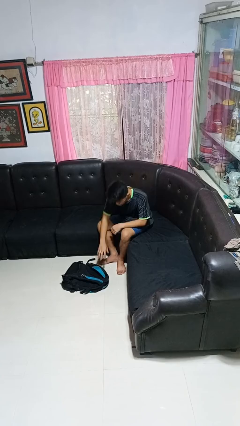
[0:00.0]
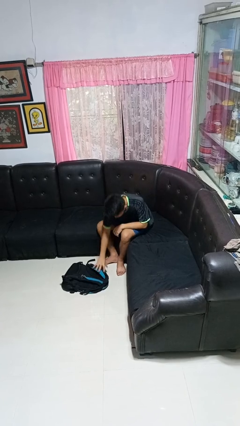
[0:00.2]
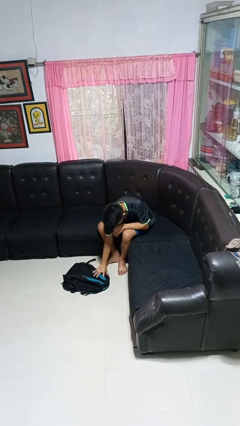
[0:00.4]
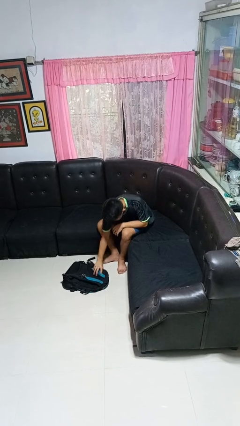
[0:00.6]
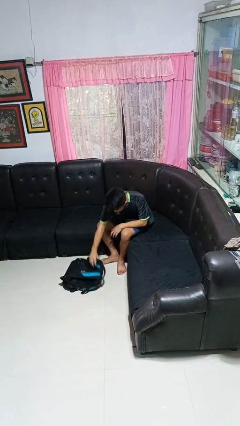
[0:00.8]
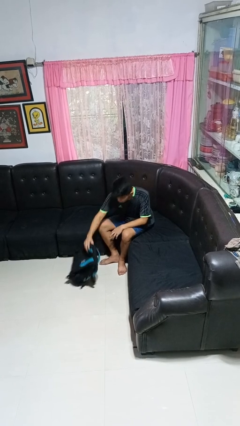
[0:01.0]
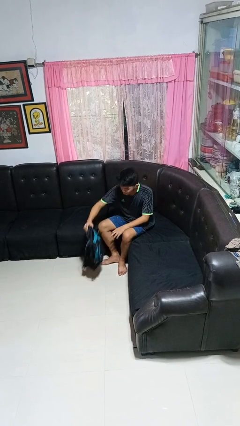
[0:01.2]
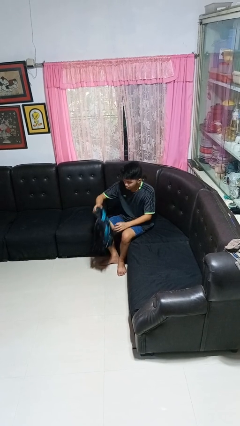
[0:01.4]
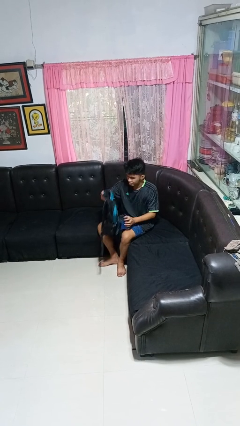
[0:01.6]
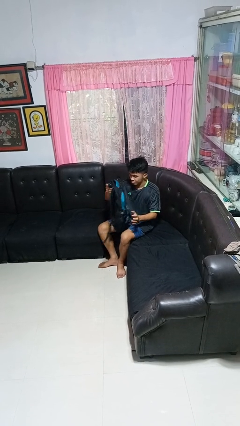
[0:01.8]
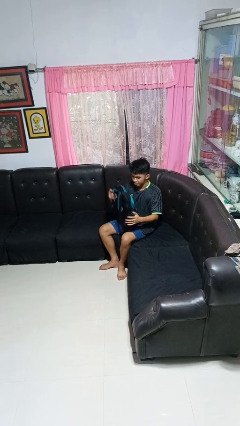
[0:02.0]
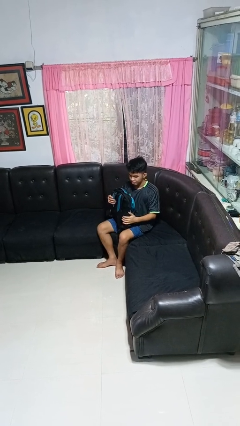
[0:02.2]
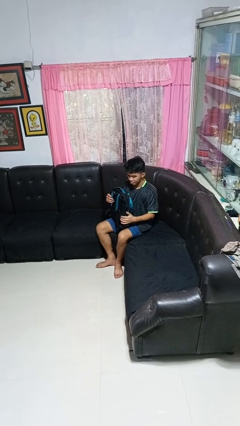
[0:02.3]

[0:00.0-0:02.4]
person picks up object from floor

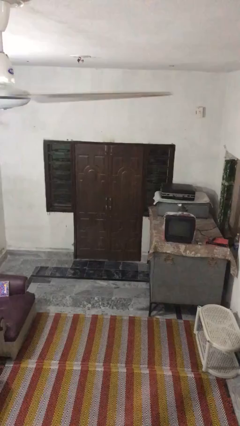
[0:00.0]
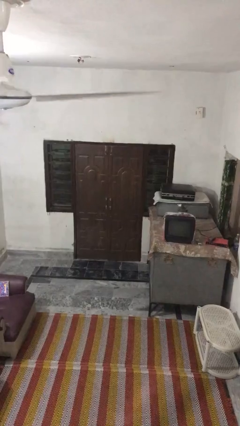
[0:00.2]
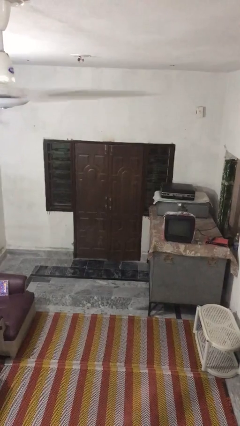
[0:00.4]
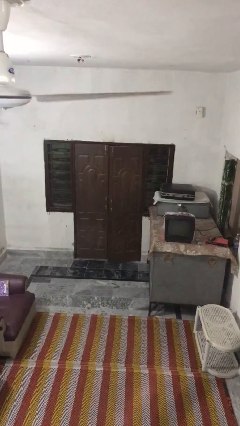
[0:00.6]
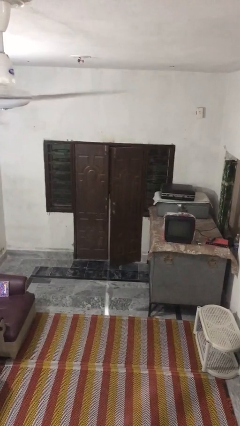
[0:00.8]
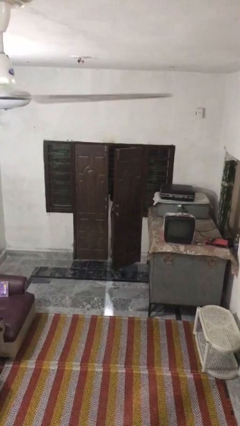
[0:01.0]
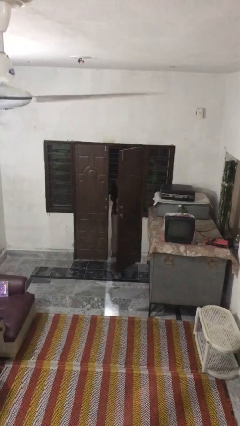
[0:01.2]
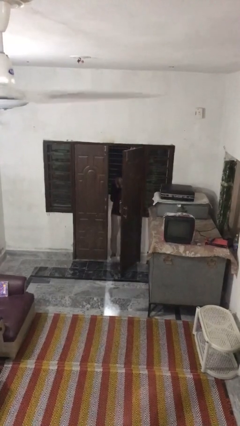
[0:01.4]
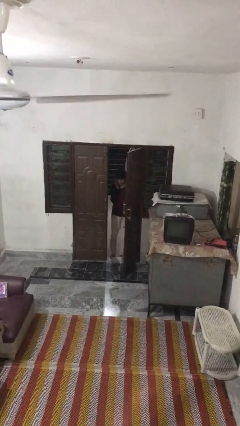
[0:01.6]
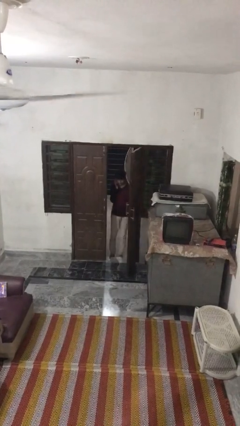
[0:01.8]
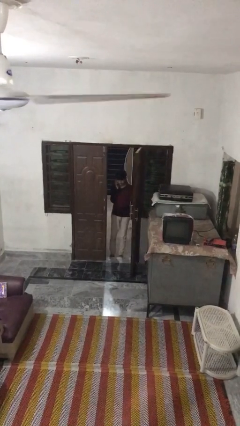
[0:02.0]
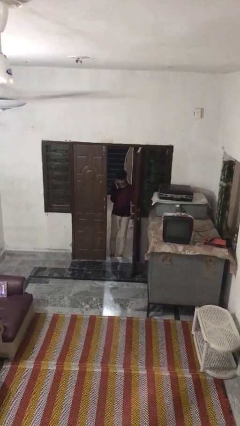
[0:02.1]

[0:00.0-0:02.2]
person opens facility door

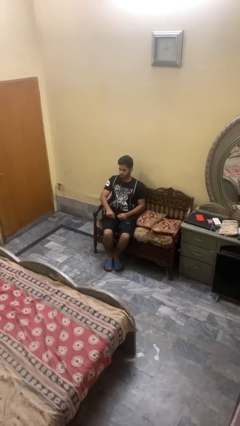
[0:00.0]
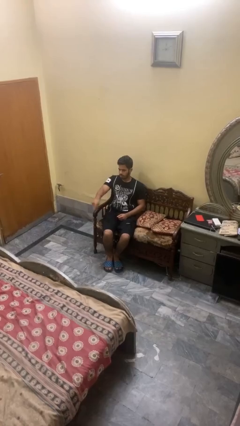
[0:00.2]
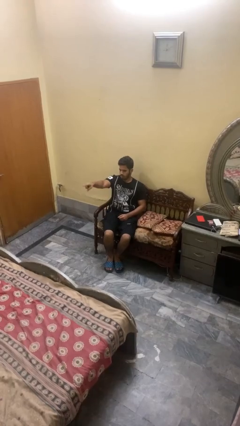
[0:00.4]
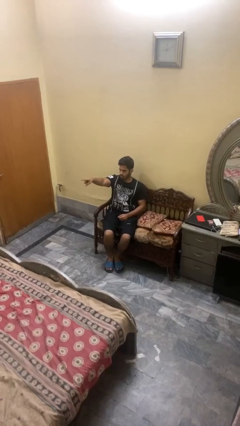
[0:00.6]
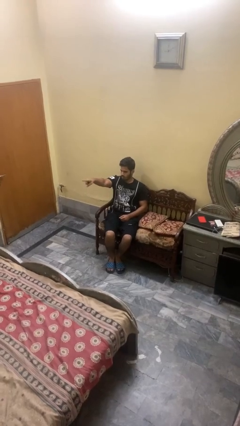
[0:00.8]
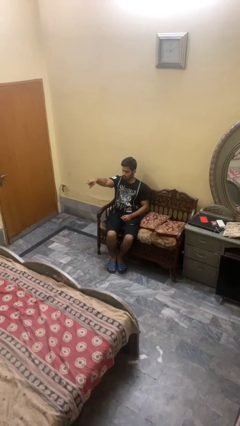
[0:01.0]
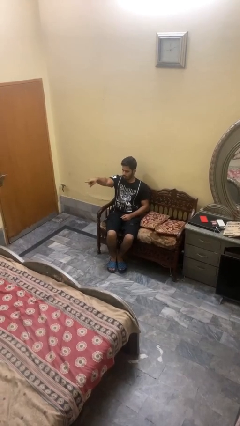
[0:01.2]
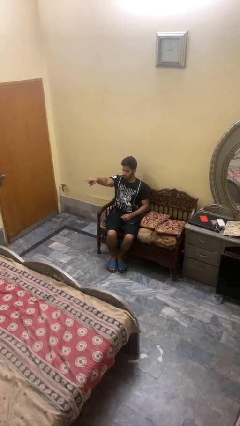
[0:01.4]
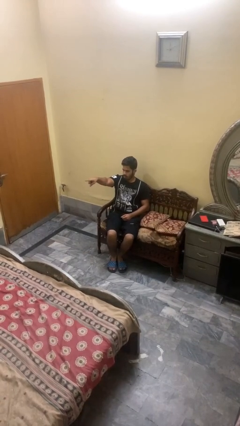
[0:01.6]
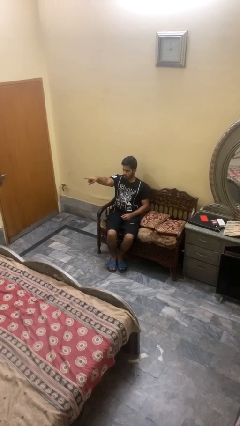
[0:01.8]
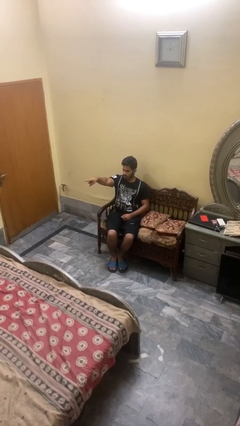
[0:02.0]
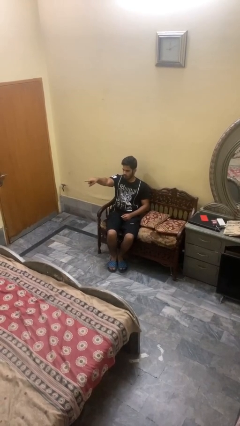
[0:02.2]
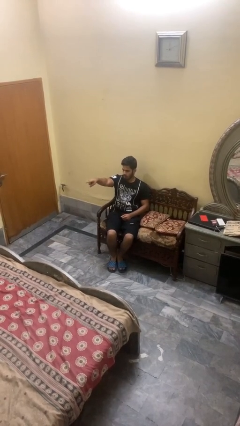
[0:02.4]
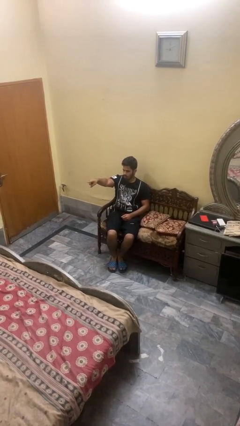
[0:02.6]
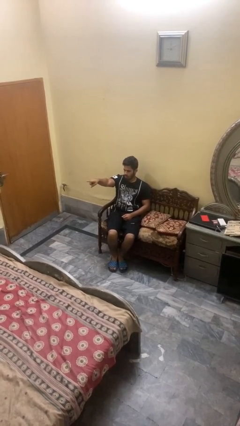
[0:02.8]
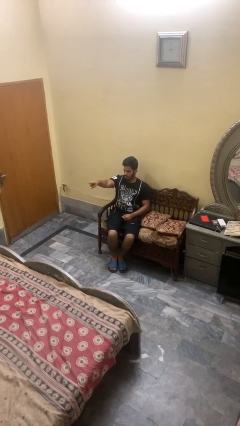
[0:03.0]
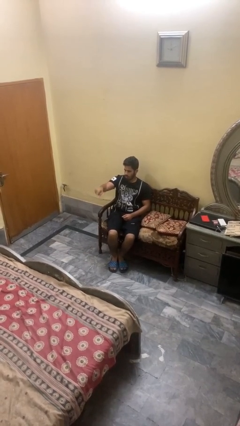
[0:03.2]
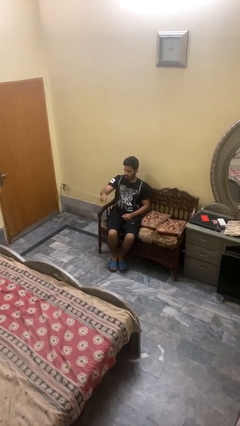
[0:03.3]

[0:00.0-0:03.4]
person points at person

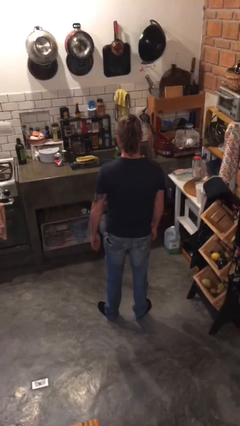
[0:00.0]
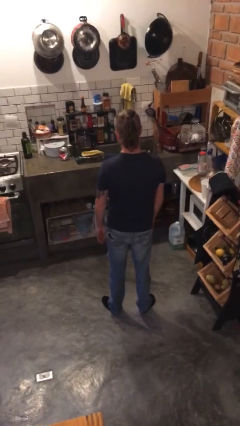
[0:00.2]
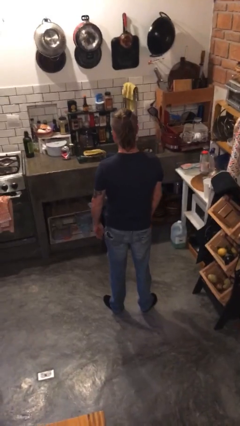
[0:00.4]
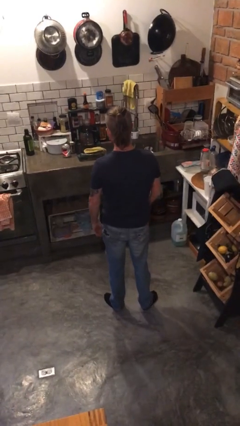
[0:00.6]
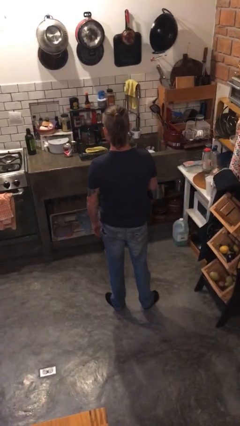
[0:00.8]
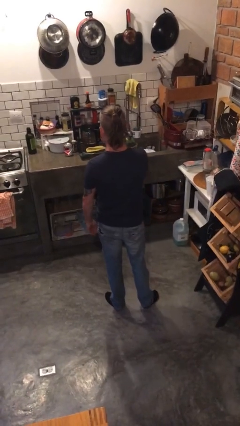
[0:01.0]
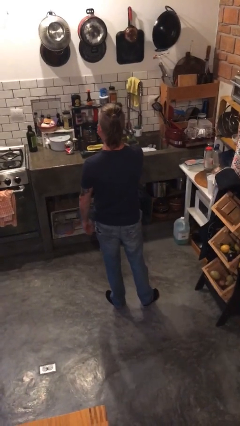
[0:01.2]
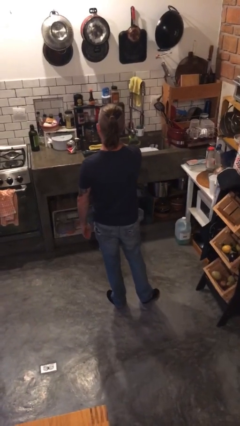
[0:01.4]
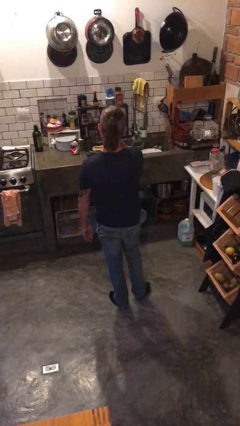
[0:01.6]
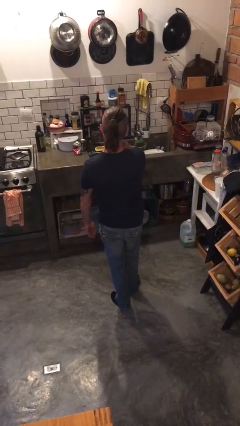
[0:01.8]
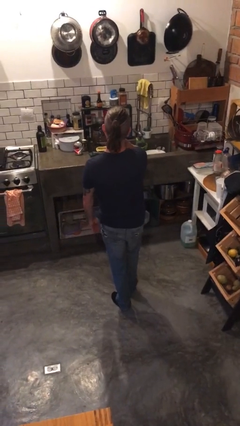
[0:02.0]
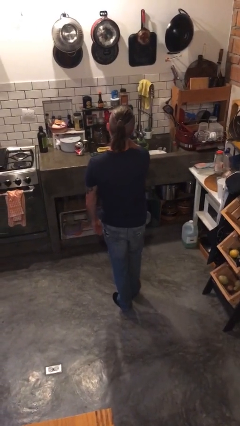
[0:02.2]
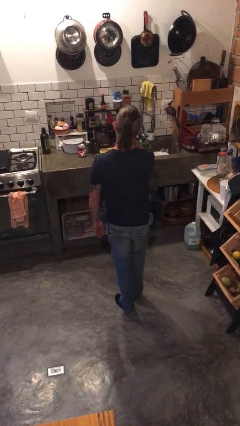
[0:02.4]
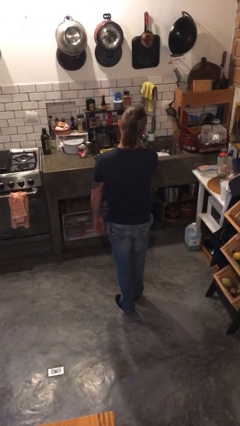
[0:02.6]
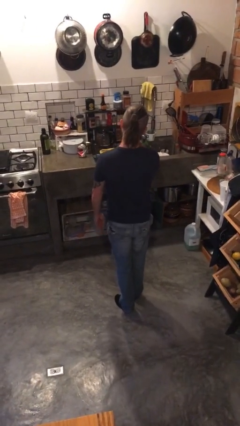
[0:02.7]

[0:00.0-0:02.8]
person yawns

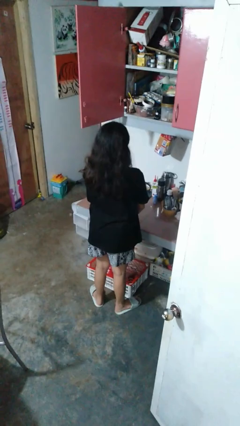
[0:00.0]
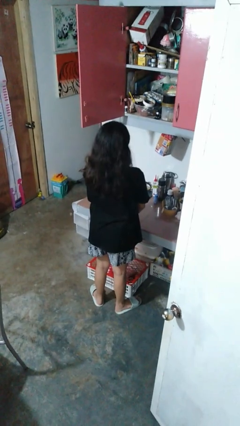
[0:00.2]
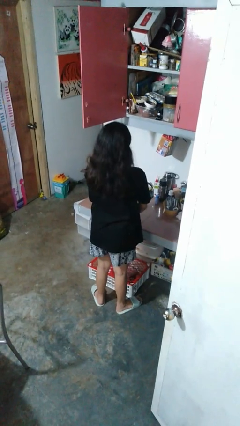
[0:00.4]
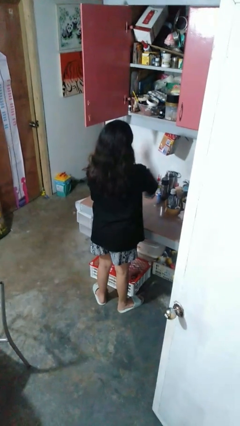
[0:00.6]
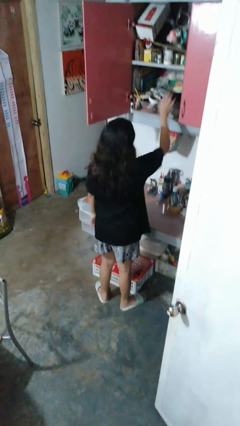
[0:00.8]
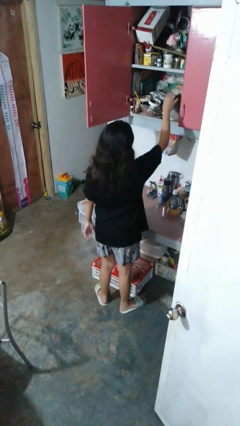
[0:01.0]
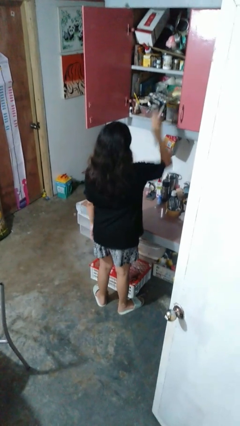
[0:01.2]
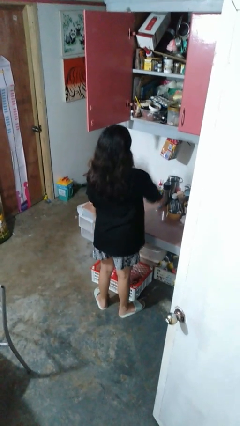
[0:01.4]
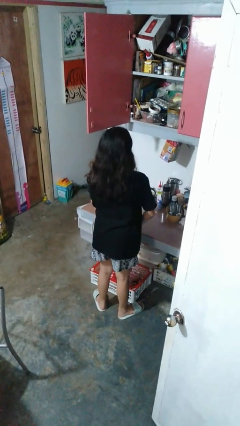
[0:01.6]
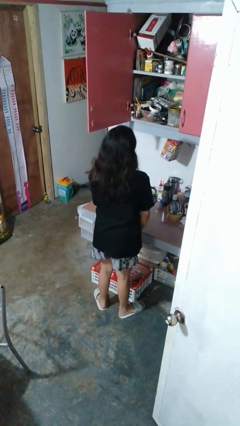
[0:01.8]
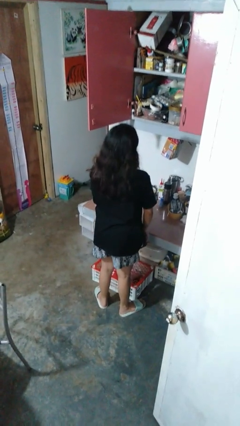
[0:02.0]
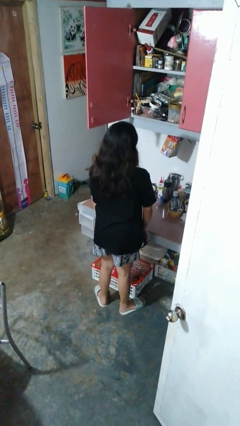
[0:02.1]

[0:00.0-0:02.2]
person takes object from cabinet

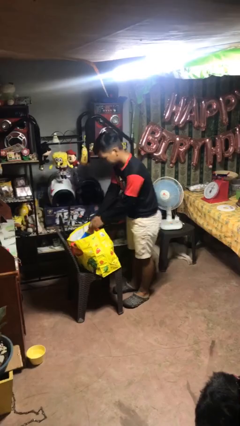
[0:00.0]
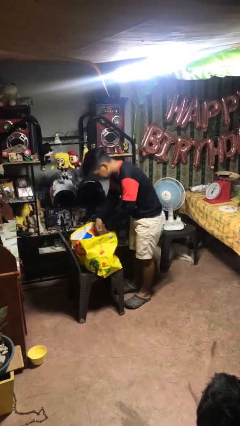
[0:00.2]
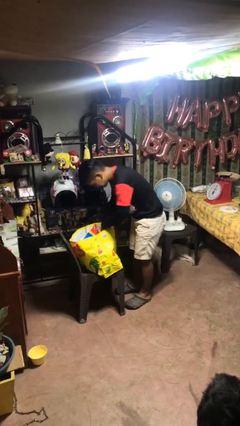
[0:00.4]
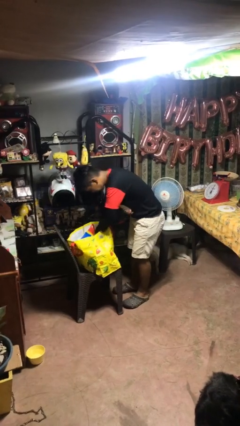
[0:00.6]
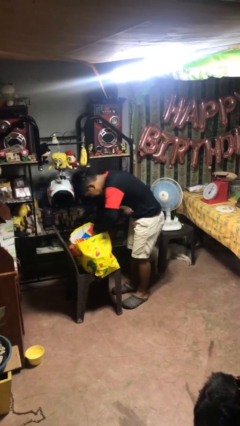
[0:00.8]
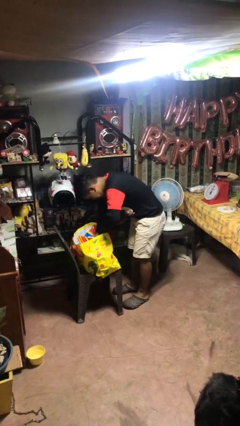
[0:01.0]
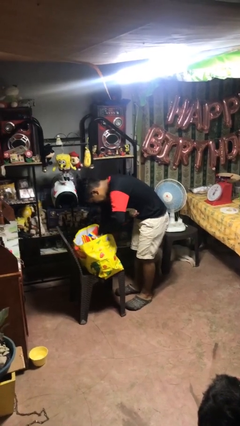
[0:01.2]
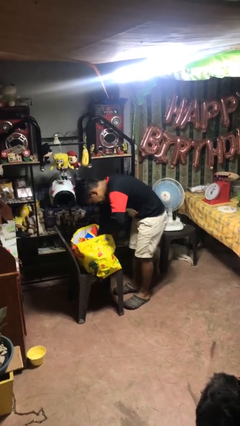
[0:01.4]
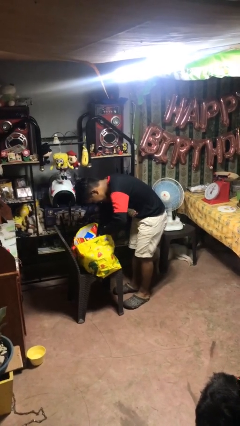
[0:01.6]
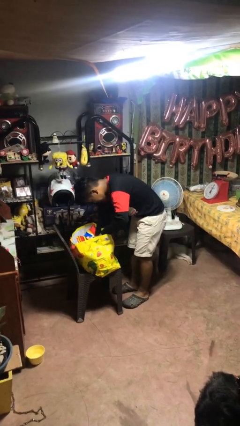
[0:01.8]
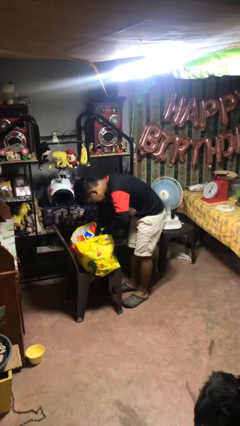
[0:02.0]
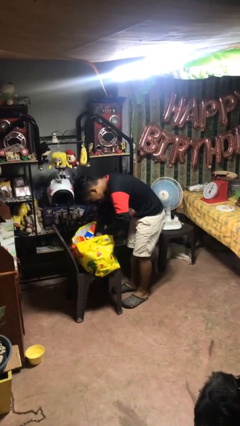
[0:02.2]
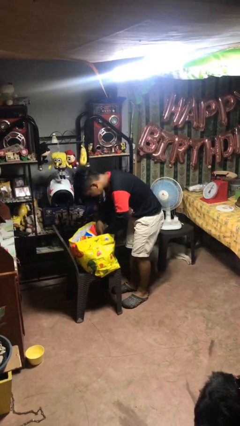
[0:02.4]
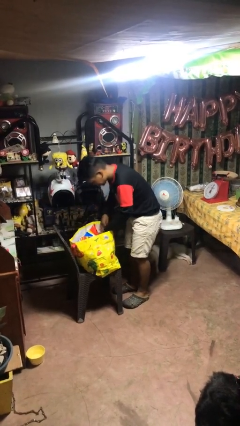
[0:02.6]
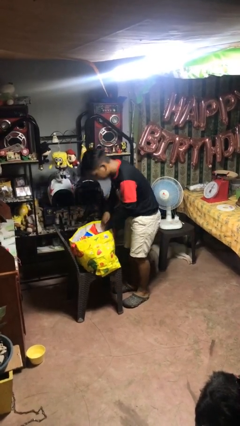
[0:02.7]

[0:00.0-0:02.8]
person searches in bag

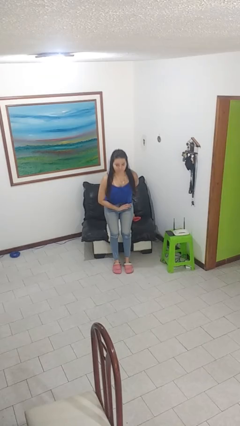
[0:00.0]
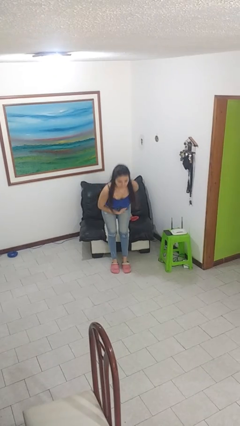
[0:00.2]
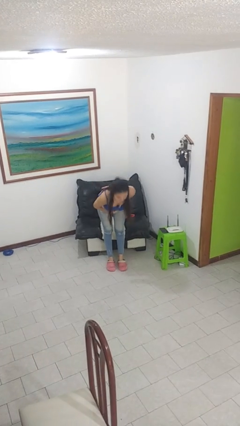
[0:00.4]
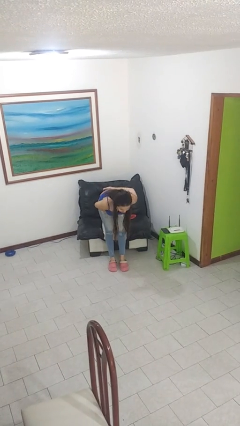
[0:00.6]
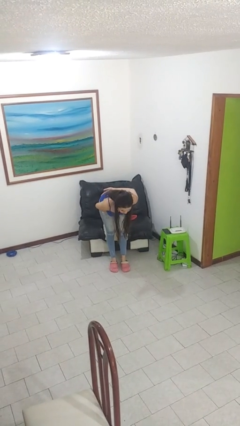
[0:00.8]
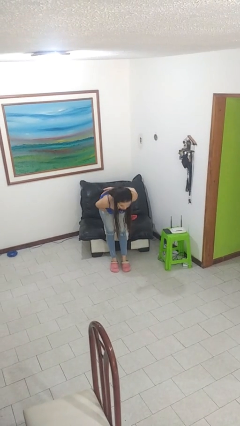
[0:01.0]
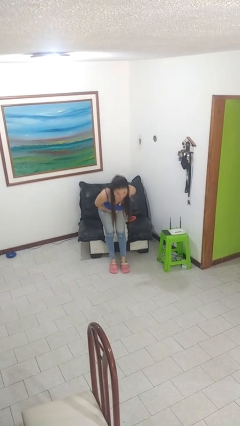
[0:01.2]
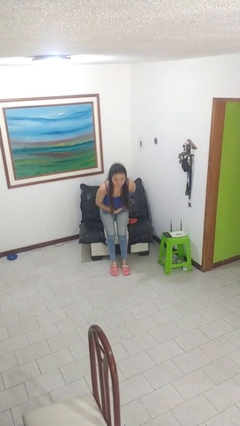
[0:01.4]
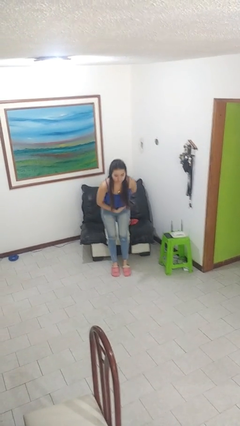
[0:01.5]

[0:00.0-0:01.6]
person bows
